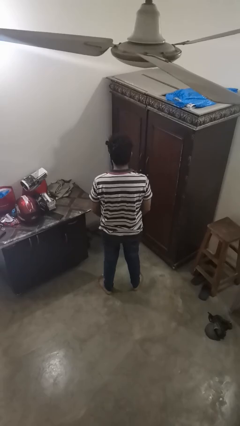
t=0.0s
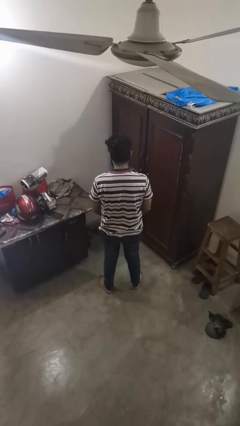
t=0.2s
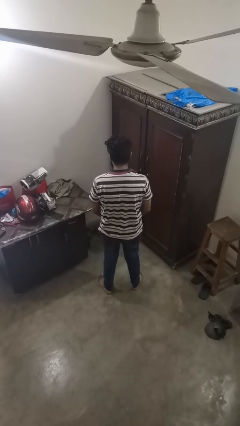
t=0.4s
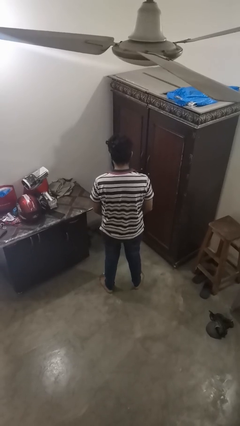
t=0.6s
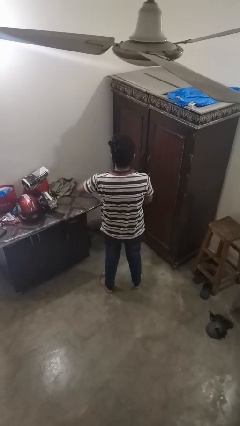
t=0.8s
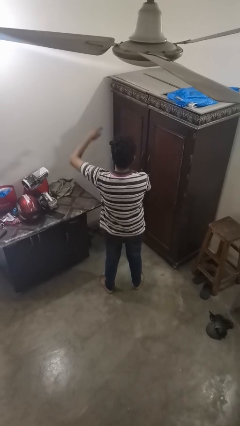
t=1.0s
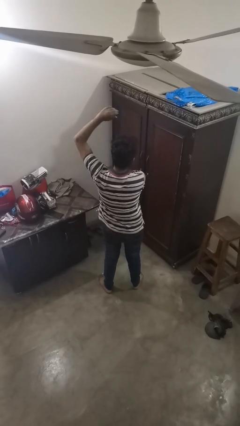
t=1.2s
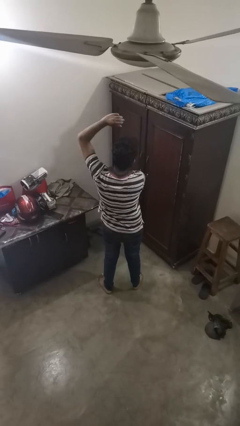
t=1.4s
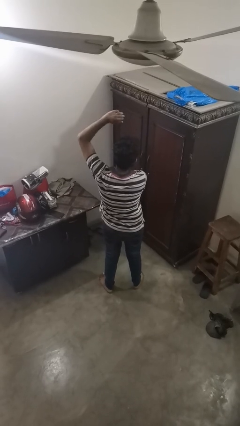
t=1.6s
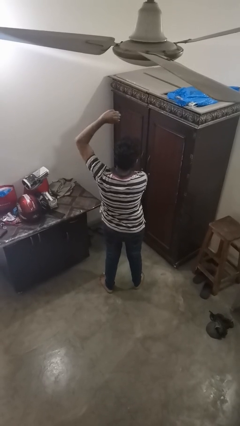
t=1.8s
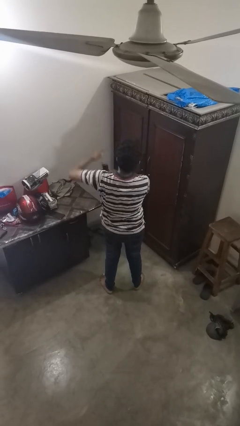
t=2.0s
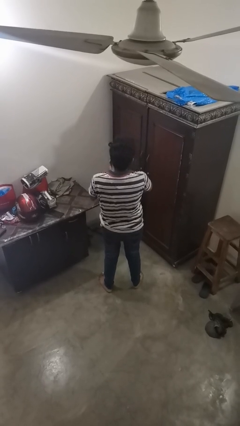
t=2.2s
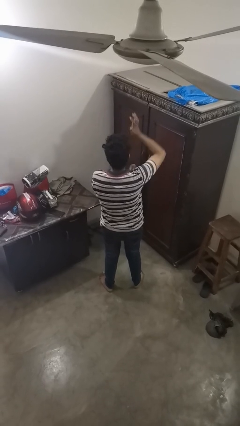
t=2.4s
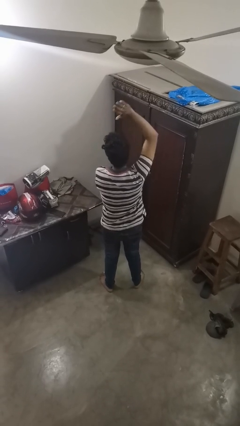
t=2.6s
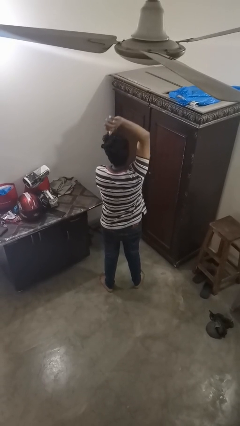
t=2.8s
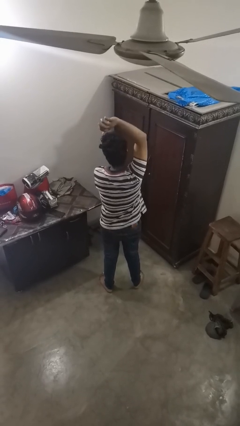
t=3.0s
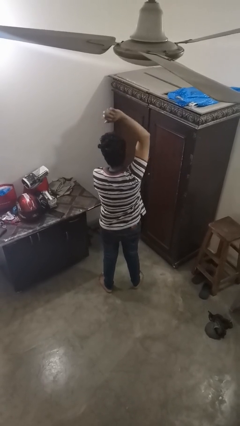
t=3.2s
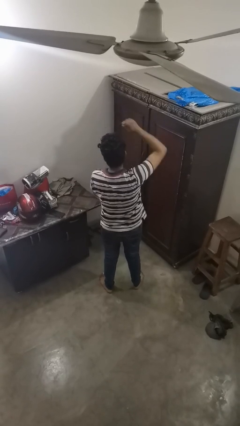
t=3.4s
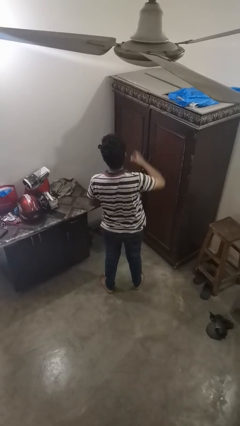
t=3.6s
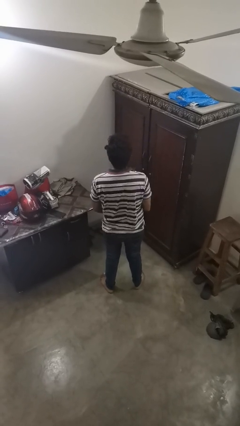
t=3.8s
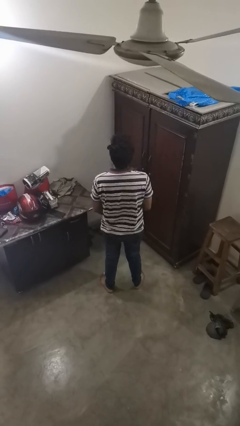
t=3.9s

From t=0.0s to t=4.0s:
person applies deodorant

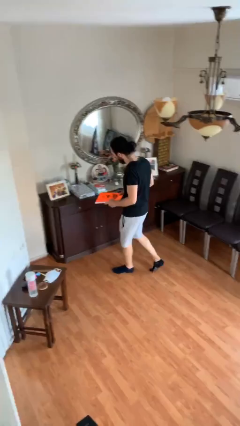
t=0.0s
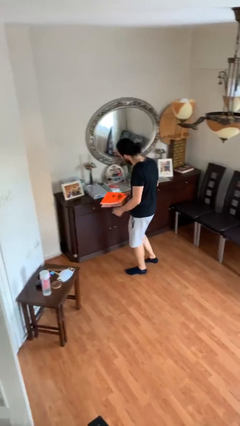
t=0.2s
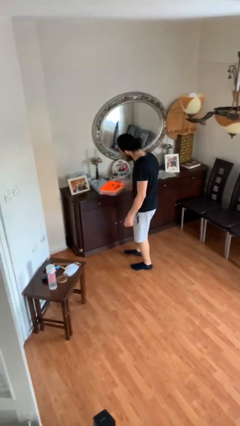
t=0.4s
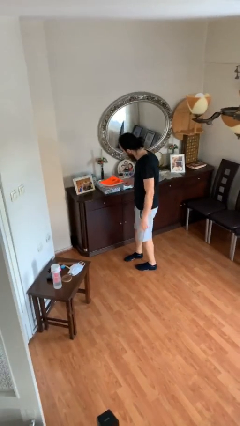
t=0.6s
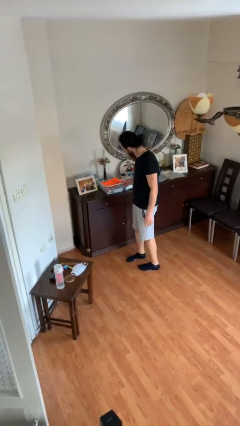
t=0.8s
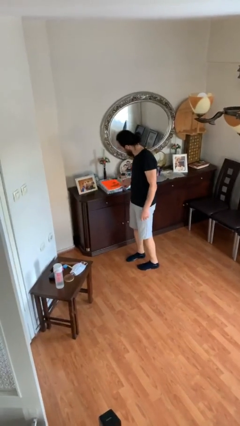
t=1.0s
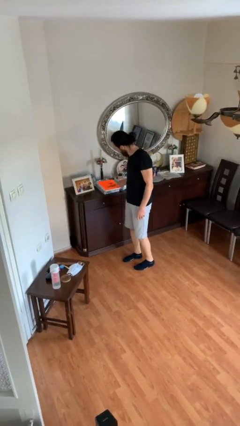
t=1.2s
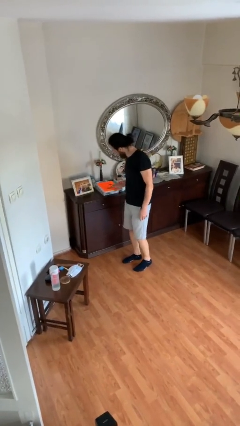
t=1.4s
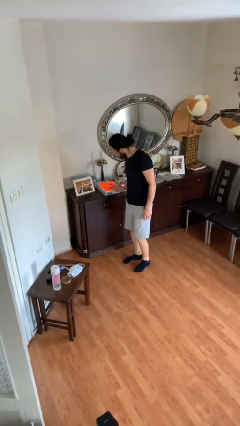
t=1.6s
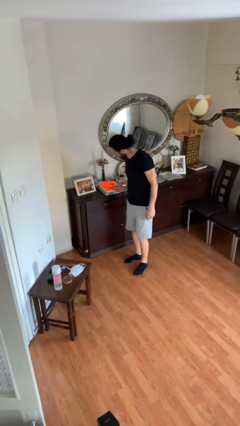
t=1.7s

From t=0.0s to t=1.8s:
person puts down object on table

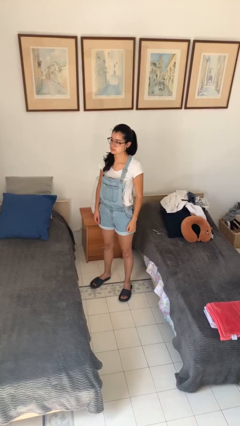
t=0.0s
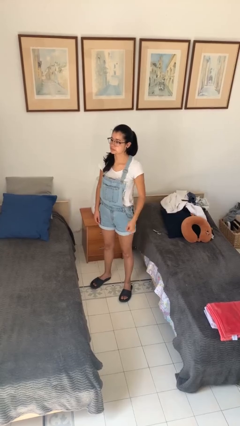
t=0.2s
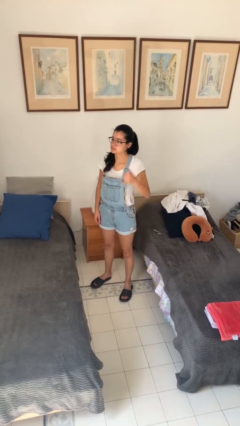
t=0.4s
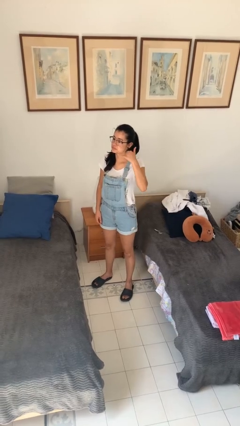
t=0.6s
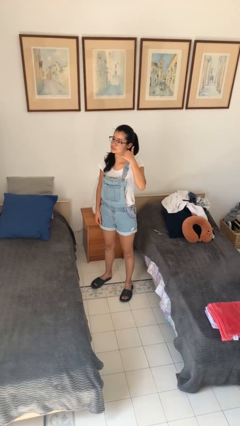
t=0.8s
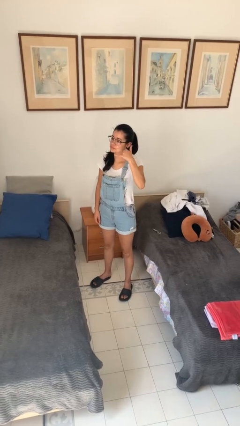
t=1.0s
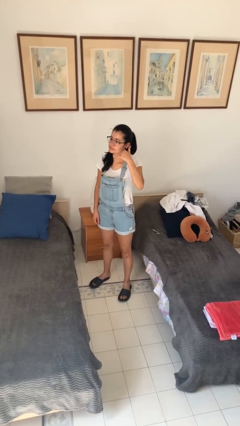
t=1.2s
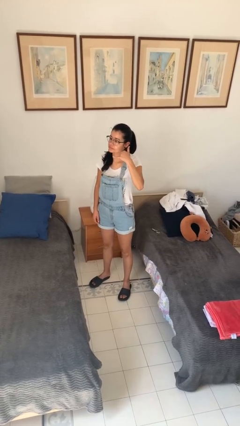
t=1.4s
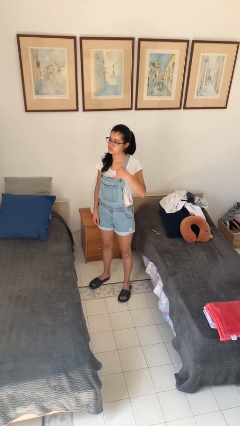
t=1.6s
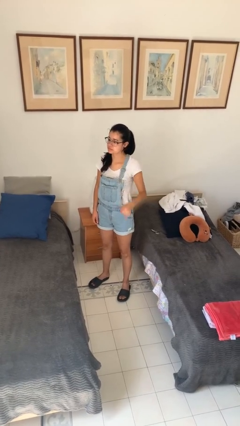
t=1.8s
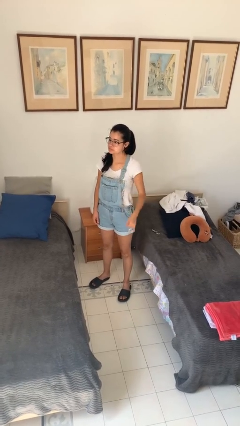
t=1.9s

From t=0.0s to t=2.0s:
person gestures call me

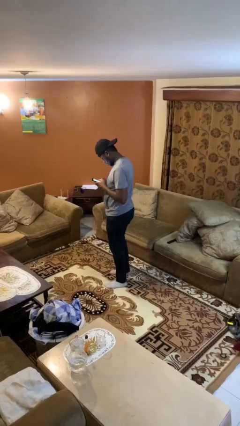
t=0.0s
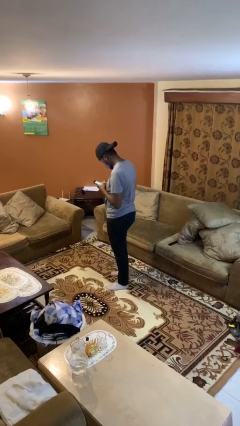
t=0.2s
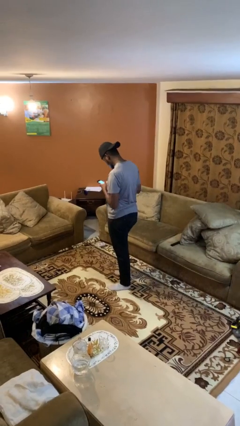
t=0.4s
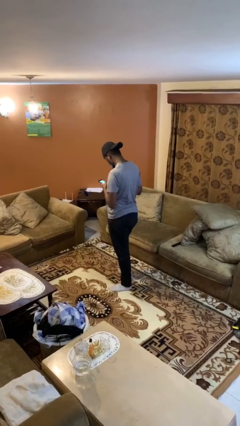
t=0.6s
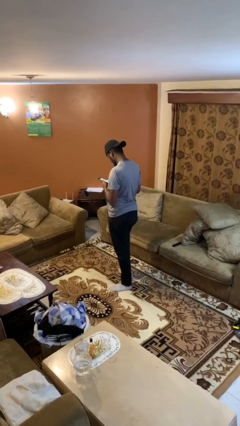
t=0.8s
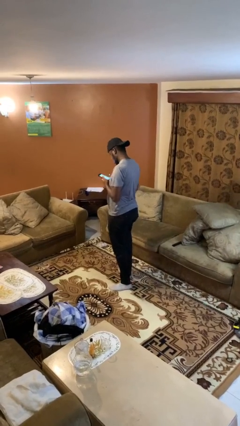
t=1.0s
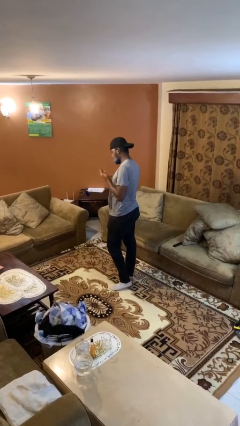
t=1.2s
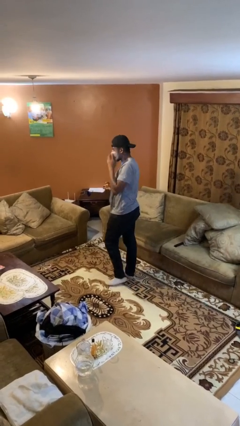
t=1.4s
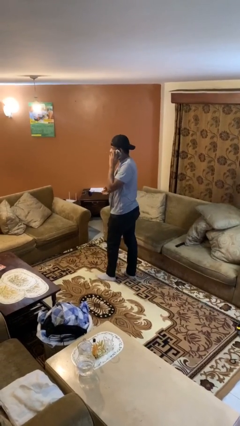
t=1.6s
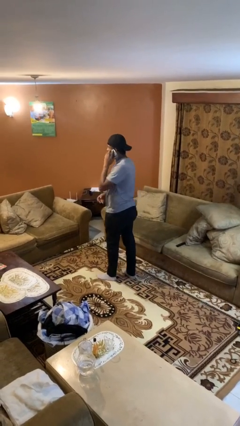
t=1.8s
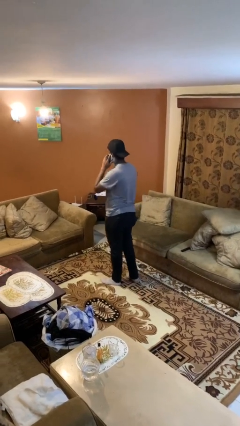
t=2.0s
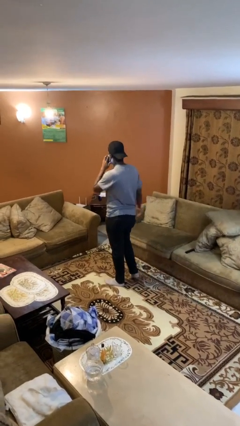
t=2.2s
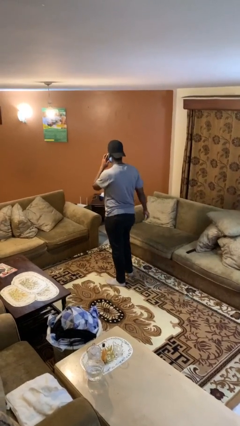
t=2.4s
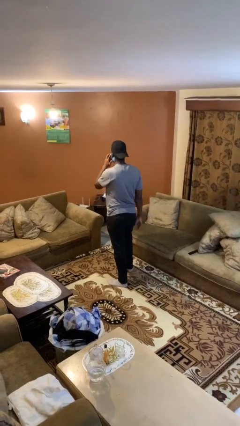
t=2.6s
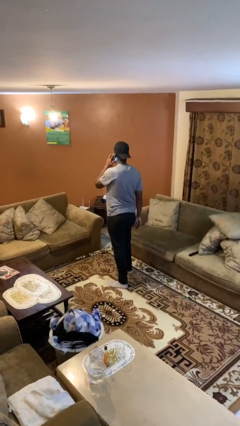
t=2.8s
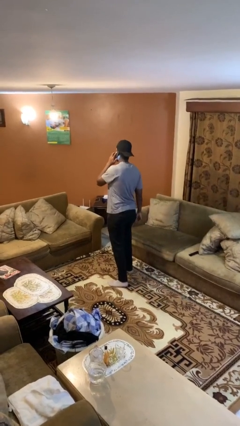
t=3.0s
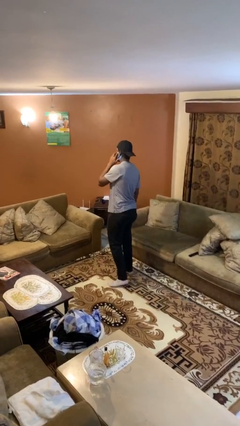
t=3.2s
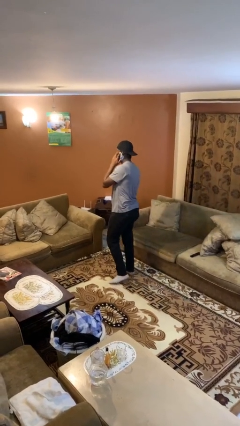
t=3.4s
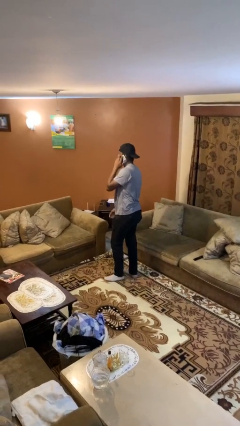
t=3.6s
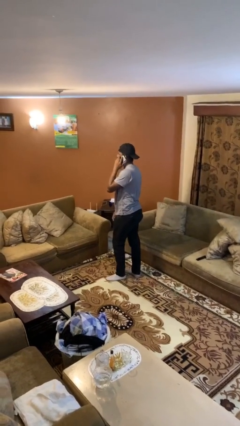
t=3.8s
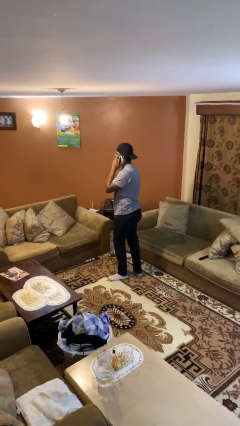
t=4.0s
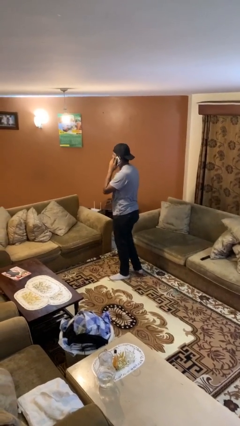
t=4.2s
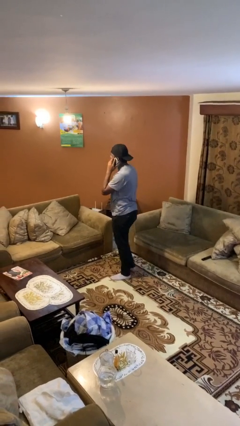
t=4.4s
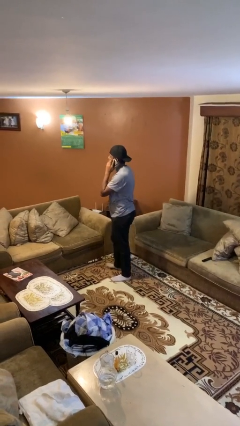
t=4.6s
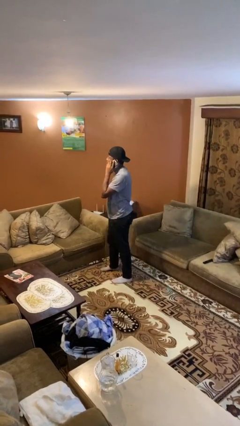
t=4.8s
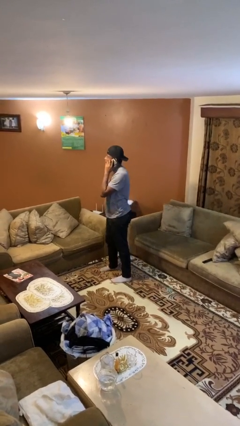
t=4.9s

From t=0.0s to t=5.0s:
person talks on phone

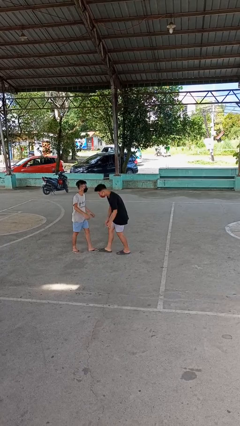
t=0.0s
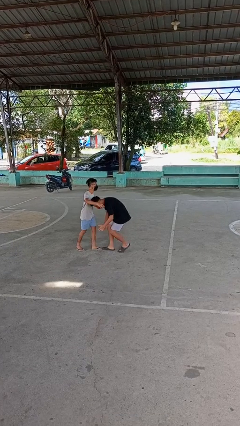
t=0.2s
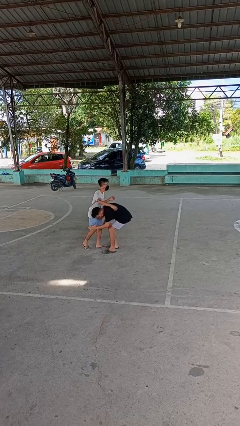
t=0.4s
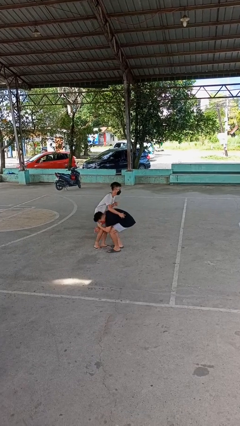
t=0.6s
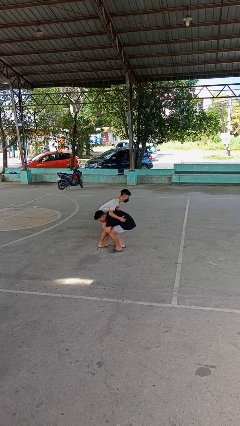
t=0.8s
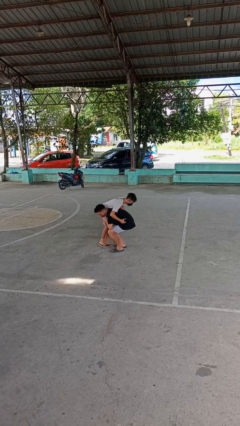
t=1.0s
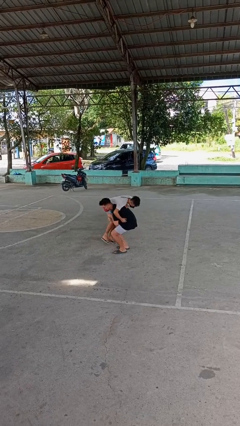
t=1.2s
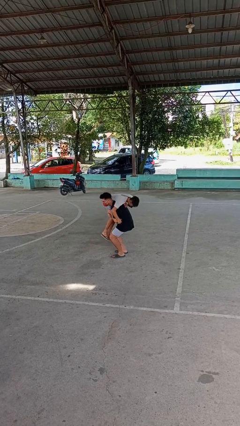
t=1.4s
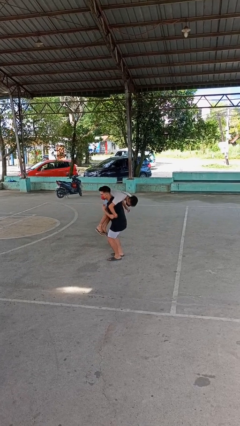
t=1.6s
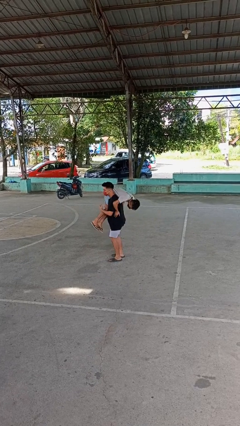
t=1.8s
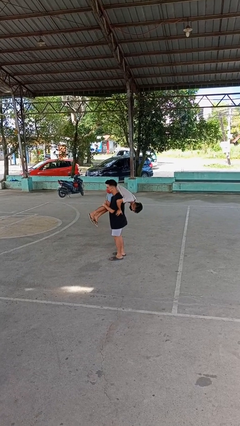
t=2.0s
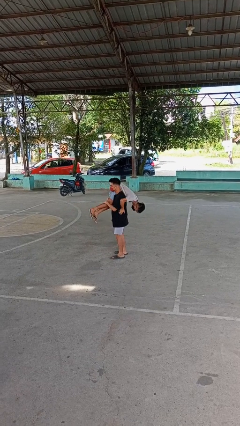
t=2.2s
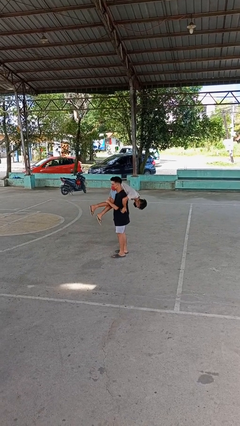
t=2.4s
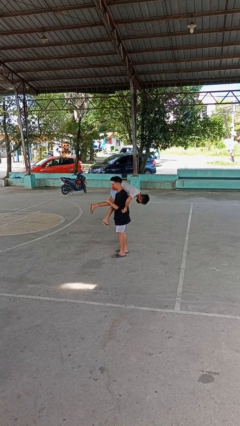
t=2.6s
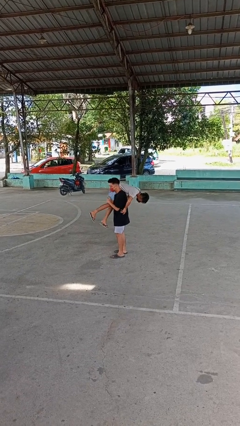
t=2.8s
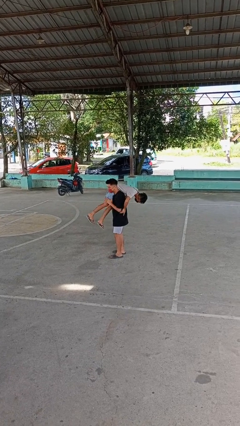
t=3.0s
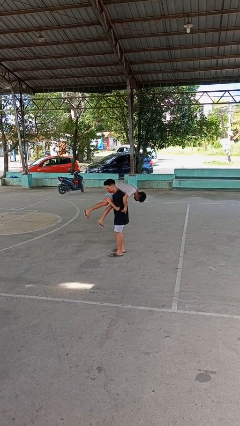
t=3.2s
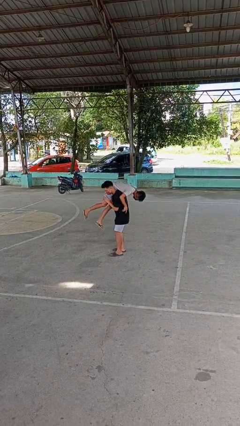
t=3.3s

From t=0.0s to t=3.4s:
person carries person over shoulder

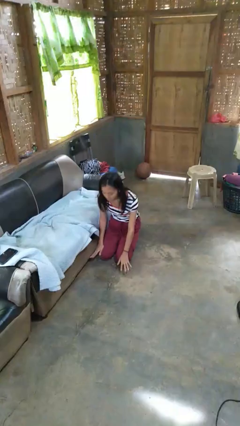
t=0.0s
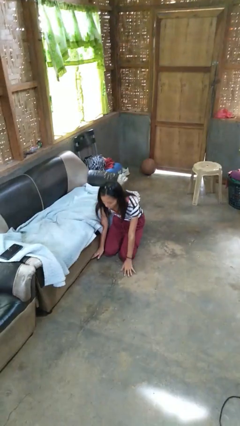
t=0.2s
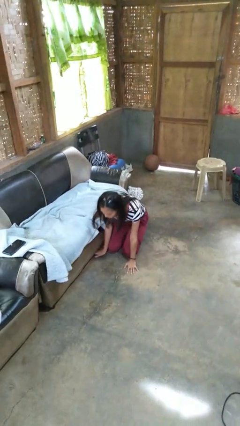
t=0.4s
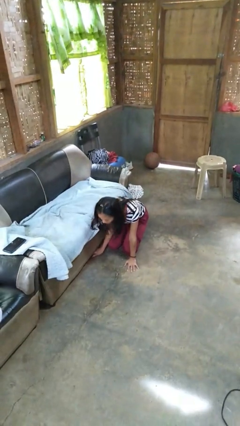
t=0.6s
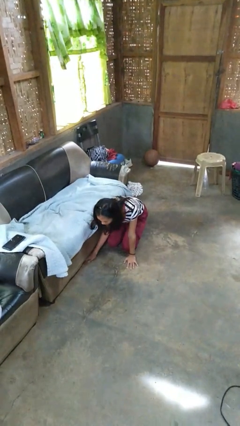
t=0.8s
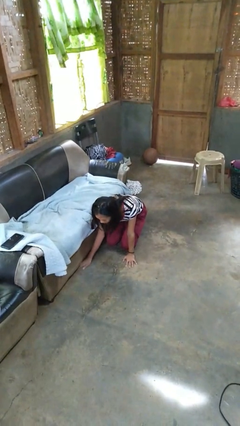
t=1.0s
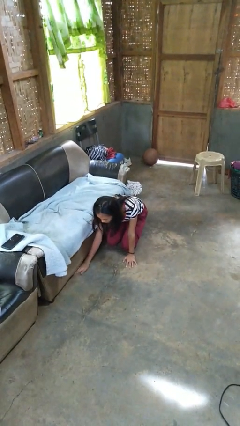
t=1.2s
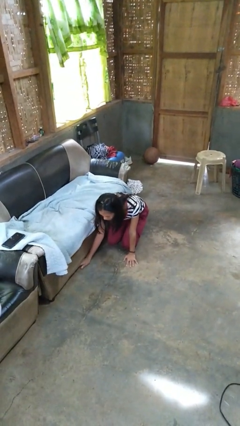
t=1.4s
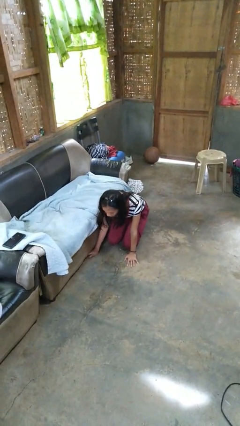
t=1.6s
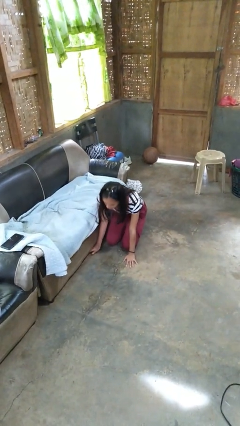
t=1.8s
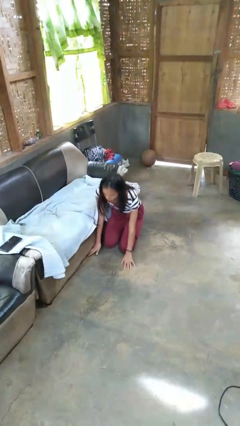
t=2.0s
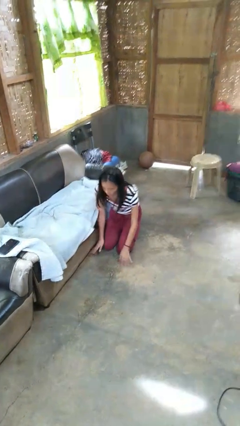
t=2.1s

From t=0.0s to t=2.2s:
person searches under couch
